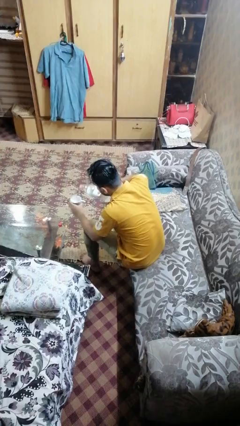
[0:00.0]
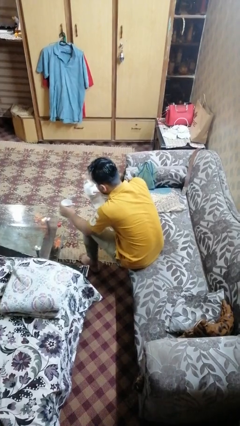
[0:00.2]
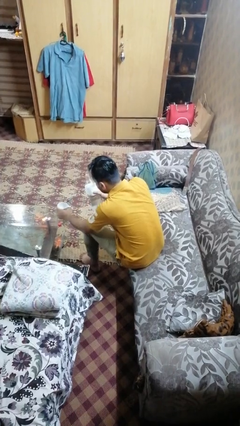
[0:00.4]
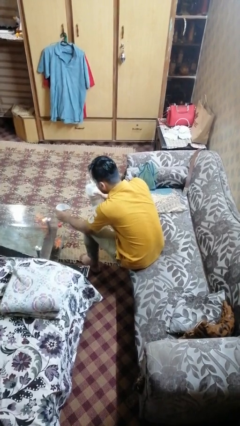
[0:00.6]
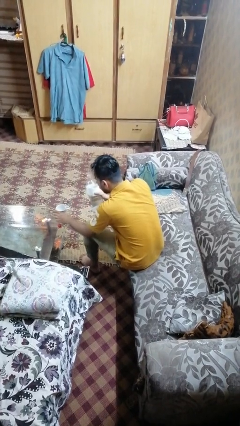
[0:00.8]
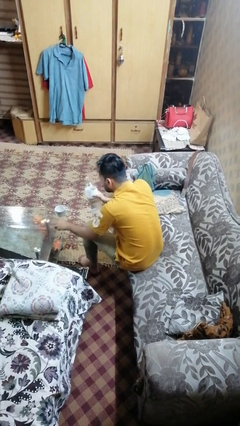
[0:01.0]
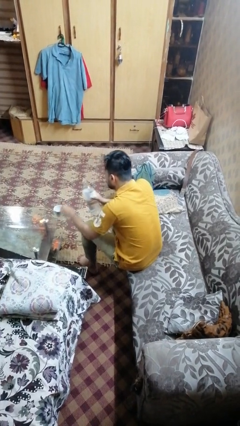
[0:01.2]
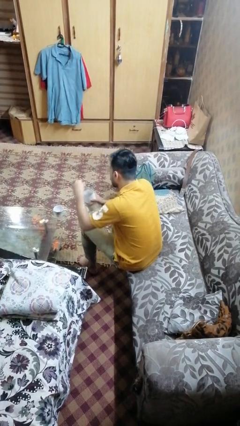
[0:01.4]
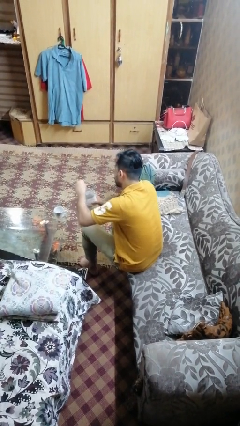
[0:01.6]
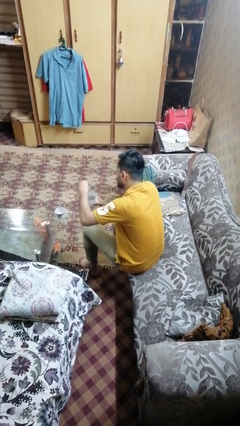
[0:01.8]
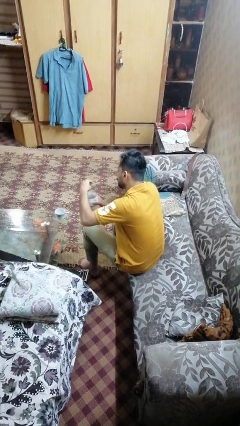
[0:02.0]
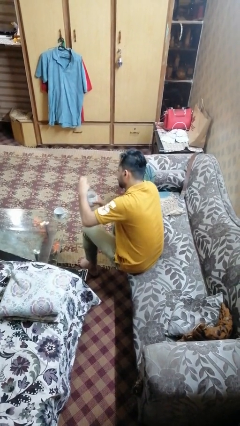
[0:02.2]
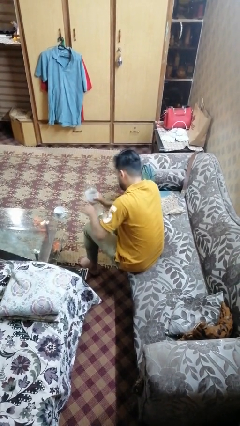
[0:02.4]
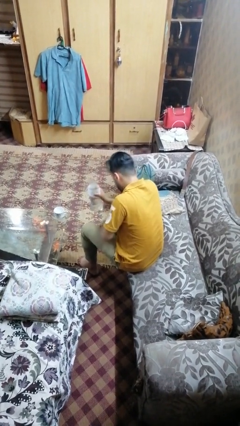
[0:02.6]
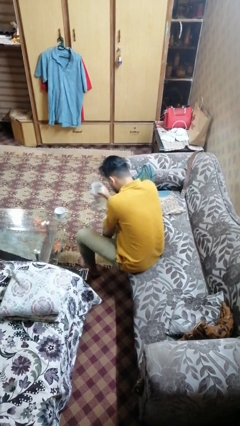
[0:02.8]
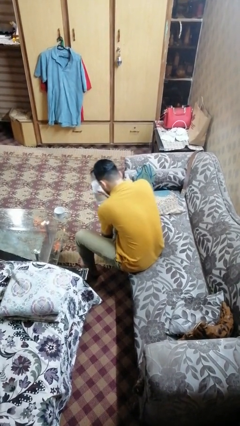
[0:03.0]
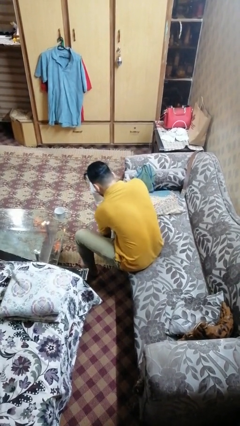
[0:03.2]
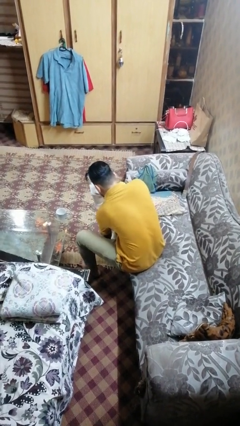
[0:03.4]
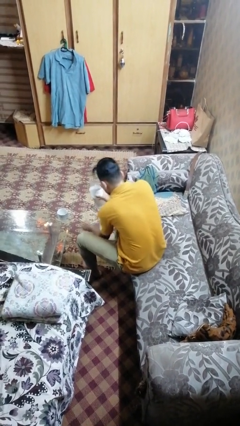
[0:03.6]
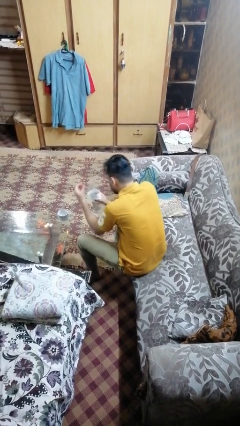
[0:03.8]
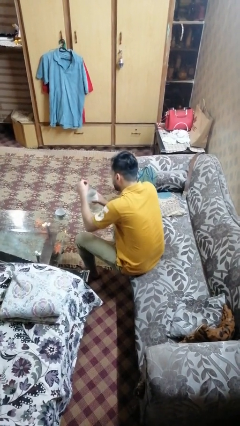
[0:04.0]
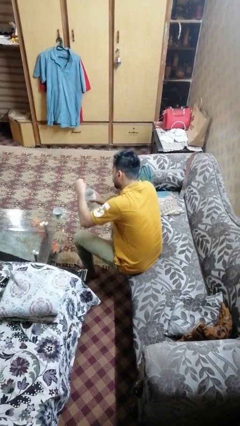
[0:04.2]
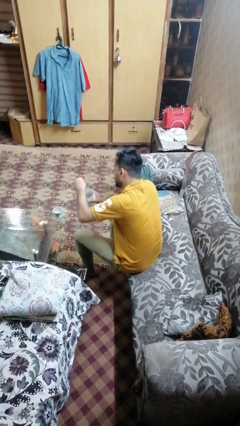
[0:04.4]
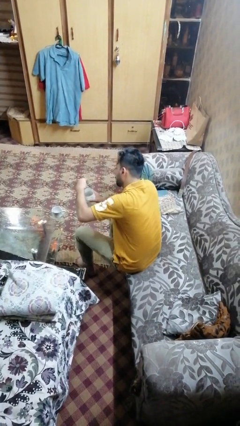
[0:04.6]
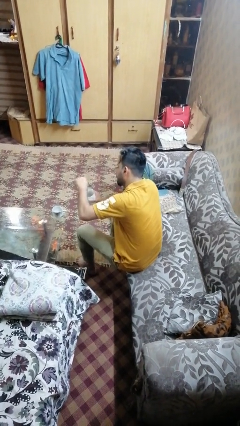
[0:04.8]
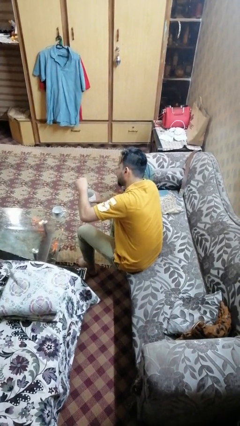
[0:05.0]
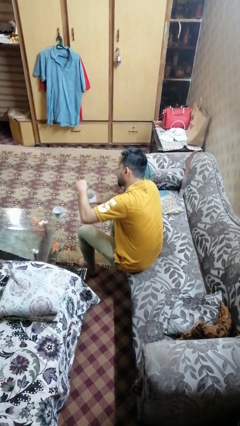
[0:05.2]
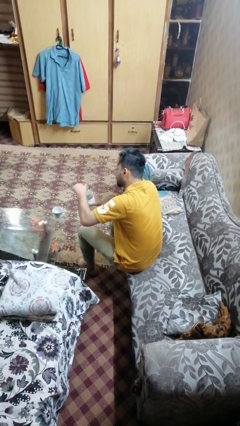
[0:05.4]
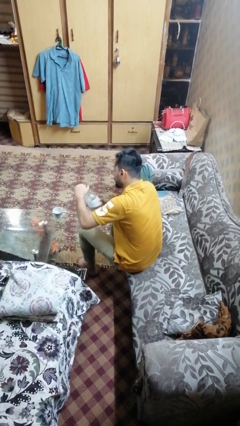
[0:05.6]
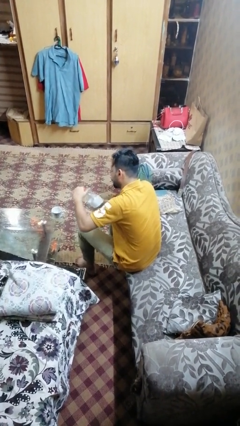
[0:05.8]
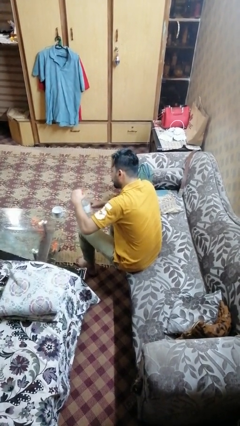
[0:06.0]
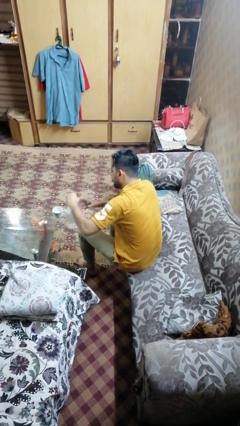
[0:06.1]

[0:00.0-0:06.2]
person screws lid to bottle

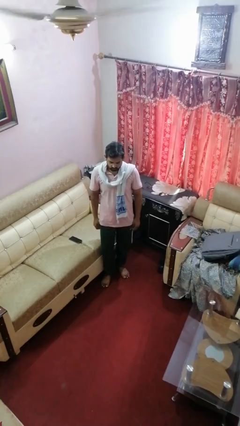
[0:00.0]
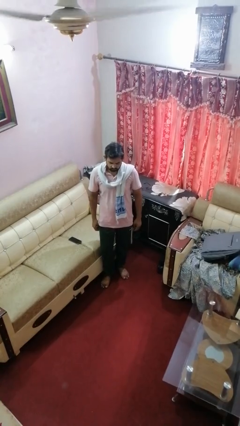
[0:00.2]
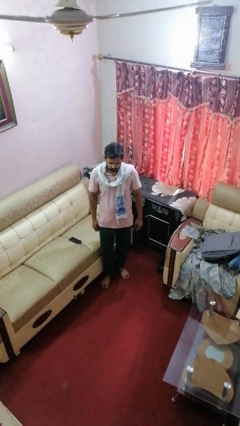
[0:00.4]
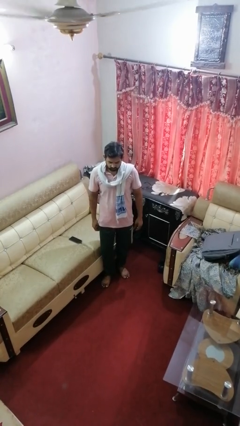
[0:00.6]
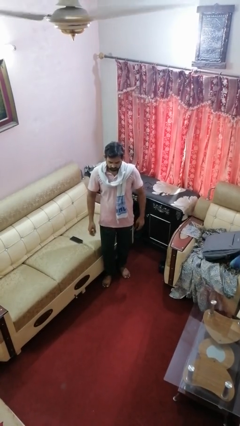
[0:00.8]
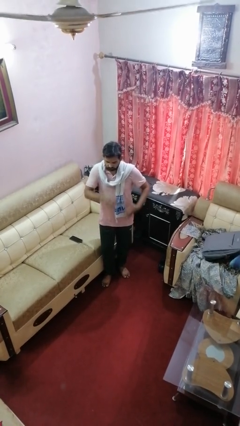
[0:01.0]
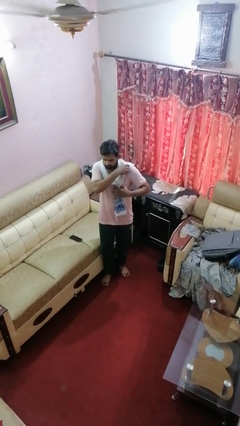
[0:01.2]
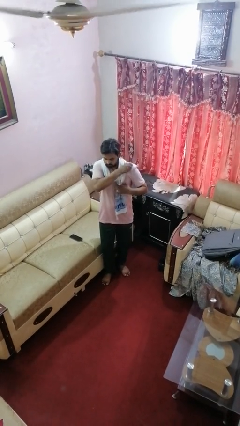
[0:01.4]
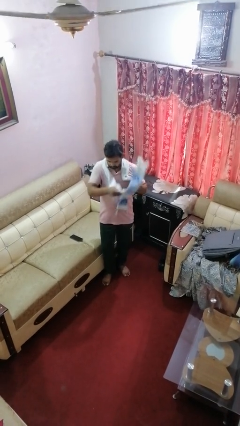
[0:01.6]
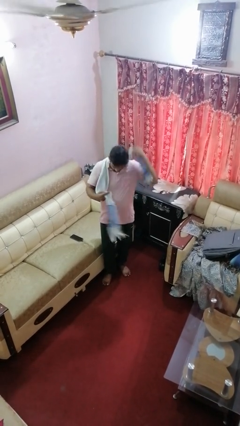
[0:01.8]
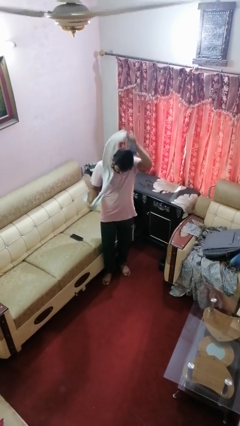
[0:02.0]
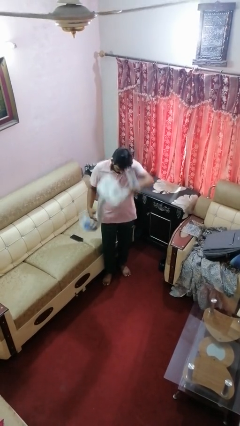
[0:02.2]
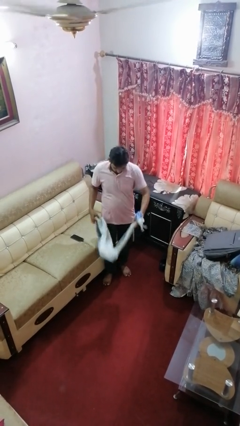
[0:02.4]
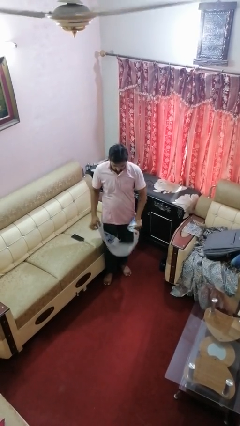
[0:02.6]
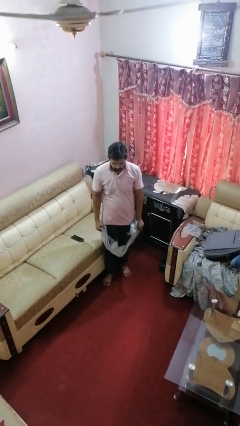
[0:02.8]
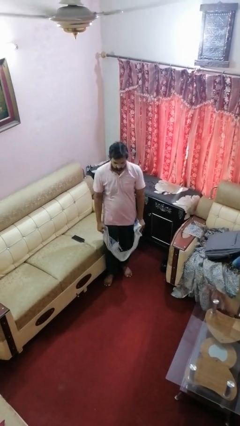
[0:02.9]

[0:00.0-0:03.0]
person takes off scarf

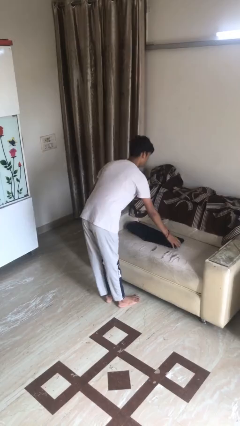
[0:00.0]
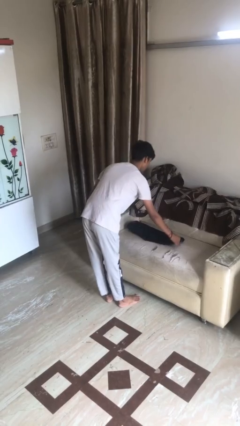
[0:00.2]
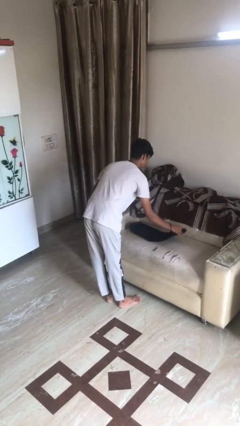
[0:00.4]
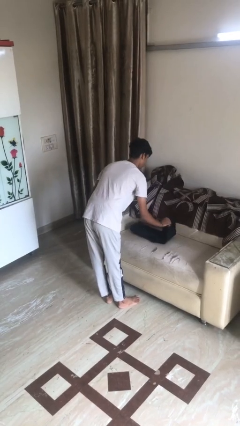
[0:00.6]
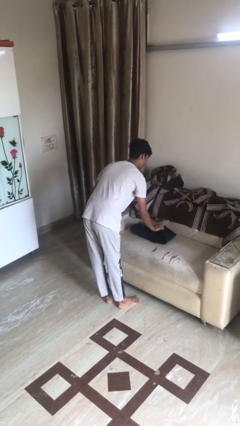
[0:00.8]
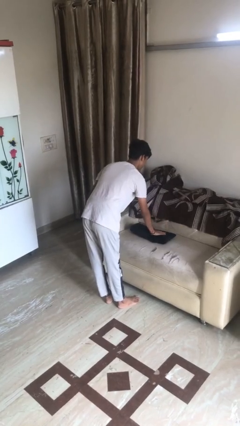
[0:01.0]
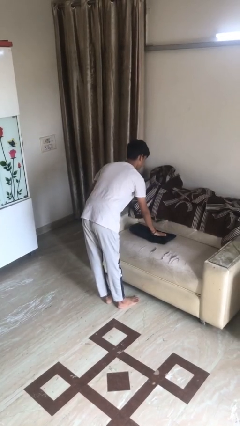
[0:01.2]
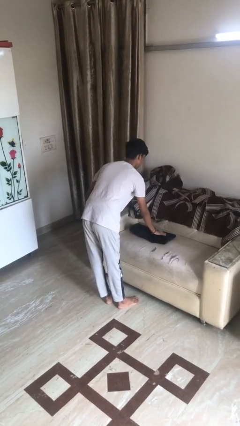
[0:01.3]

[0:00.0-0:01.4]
person folds pants

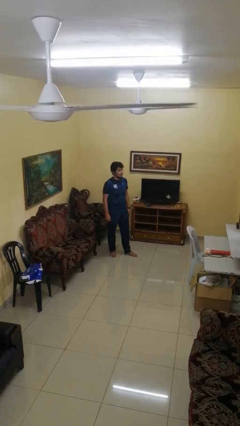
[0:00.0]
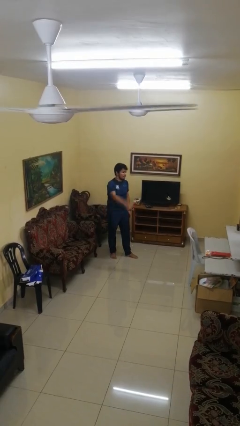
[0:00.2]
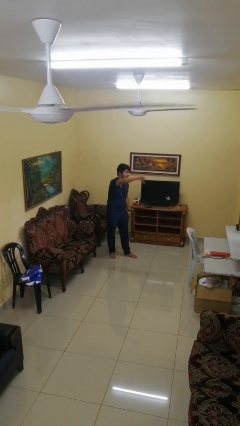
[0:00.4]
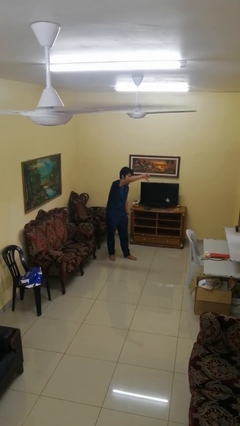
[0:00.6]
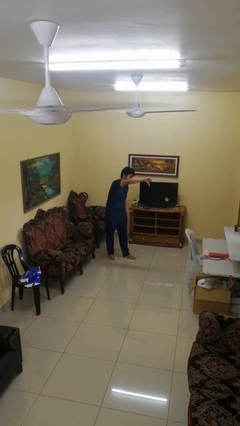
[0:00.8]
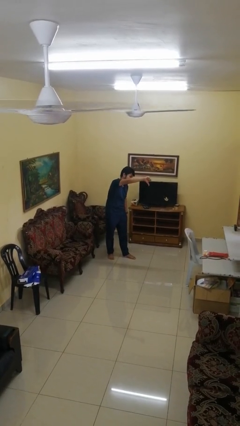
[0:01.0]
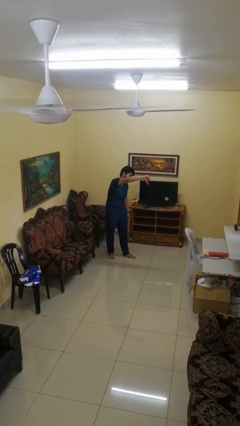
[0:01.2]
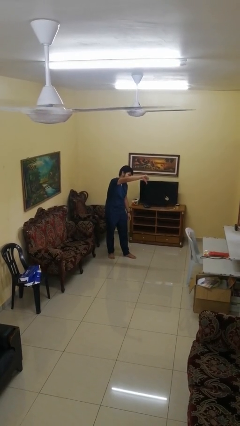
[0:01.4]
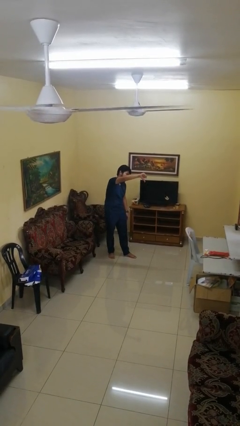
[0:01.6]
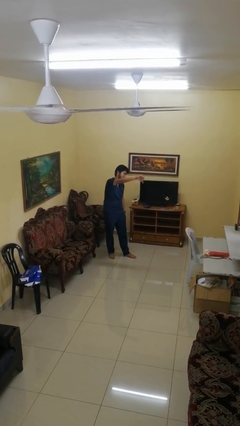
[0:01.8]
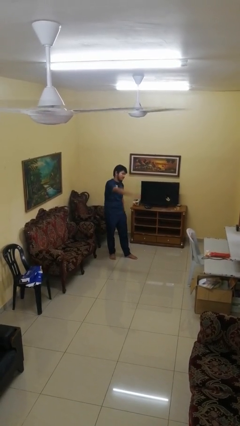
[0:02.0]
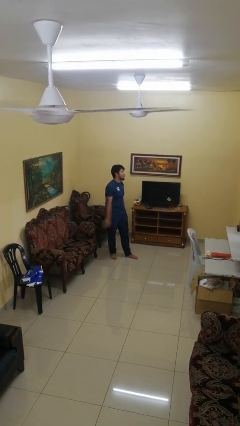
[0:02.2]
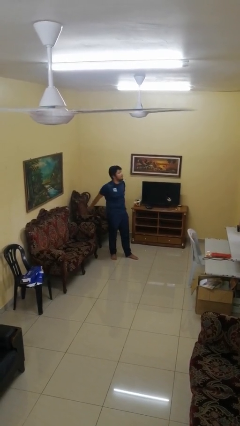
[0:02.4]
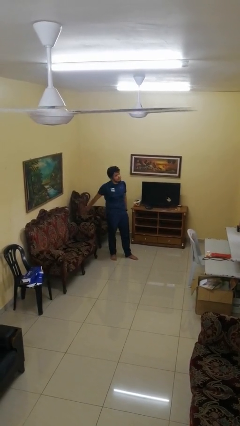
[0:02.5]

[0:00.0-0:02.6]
person gestures thumbs down

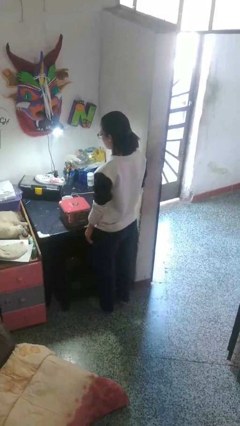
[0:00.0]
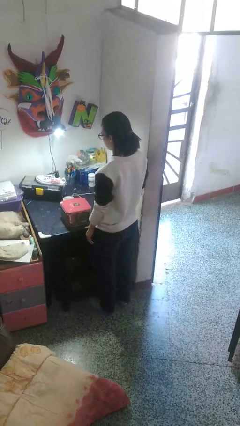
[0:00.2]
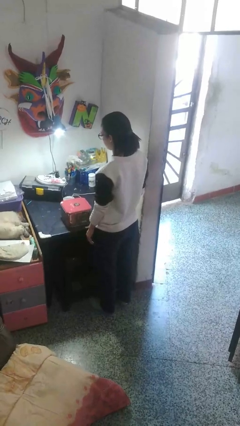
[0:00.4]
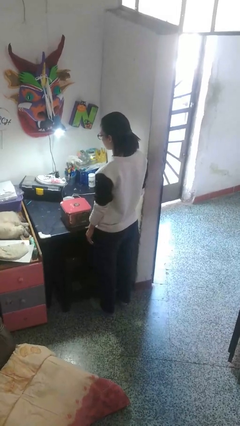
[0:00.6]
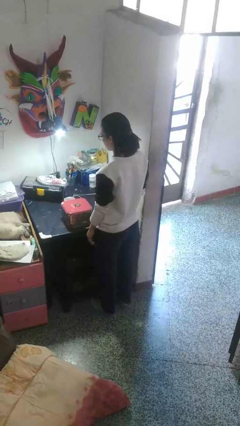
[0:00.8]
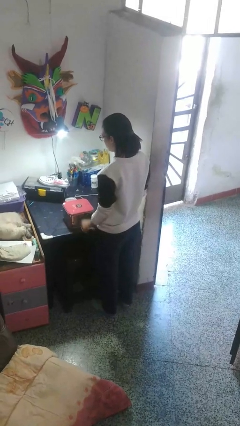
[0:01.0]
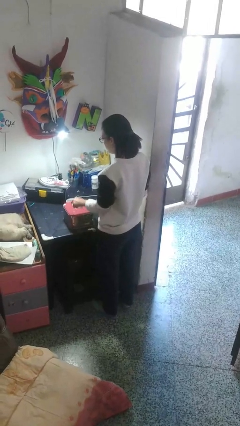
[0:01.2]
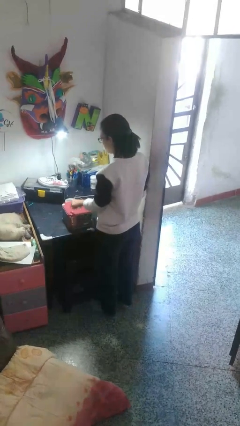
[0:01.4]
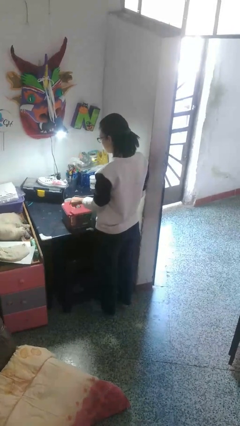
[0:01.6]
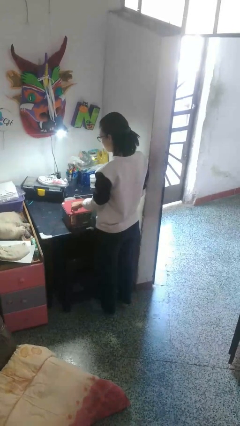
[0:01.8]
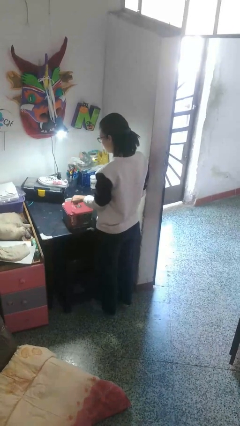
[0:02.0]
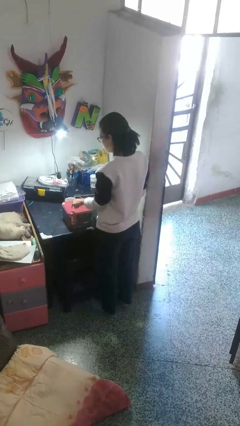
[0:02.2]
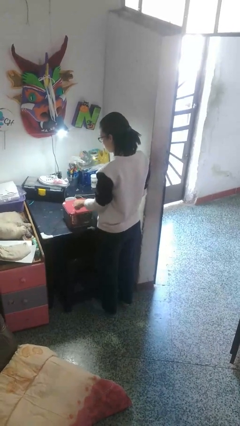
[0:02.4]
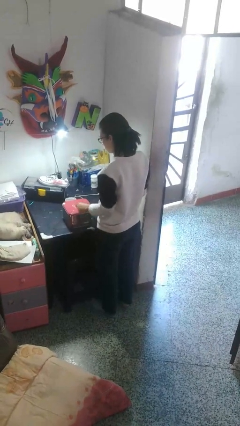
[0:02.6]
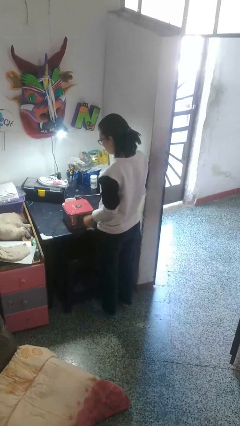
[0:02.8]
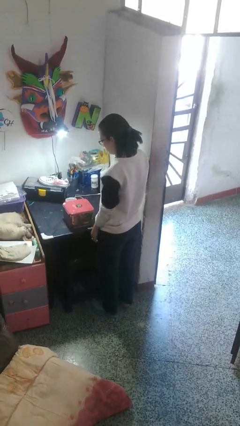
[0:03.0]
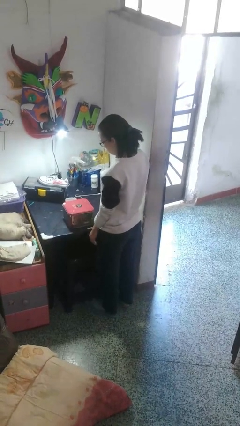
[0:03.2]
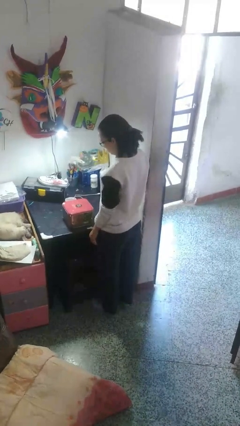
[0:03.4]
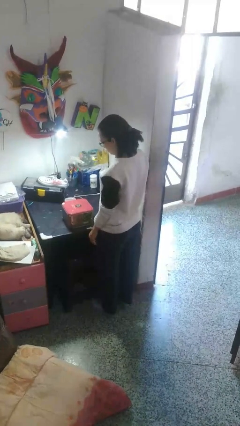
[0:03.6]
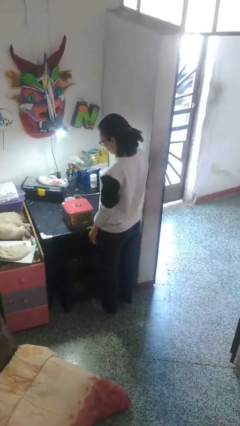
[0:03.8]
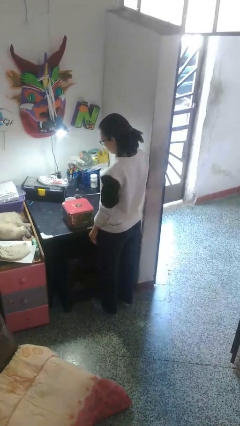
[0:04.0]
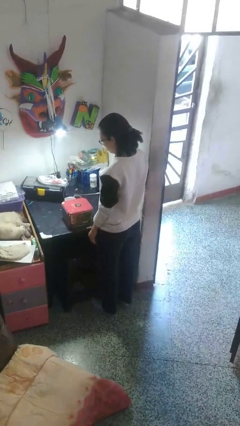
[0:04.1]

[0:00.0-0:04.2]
person taps object with finger

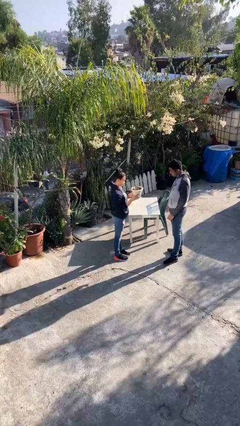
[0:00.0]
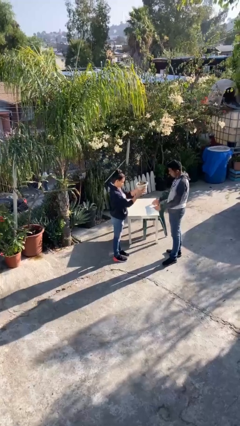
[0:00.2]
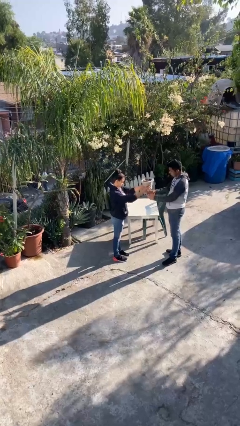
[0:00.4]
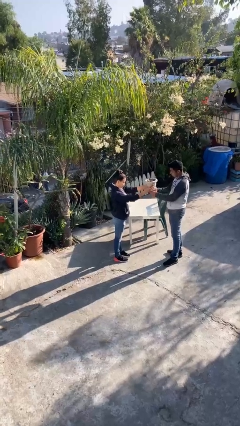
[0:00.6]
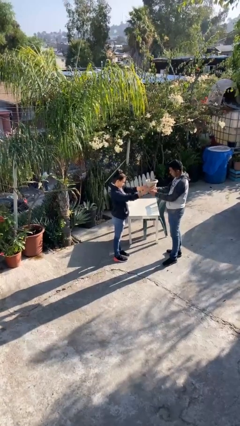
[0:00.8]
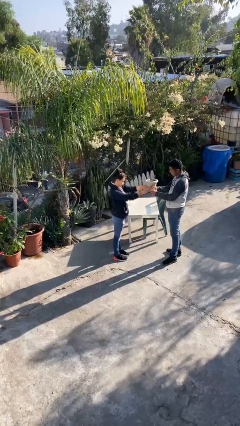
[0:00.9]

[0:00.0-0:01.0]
person transfers object to person
